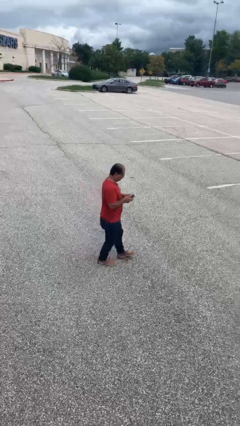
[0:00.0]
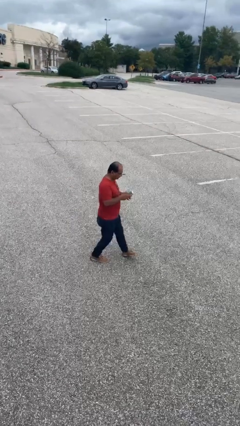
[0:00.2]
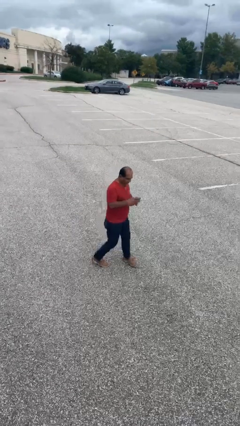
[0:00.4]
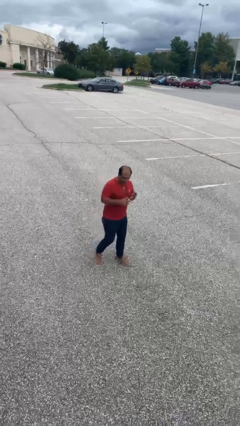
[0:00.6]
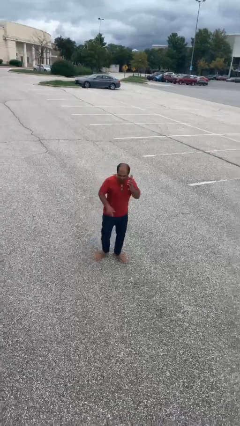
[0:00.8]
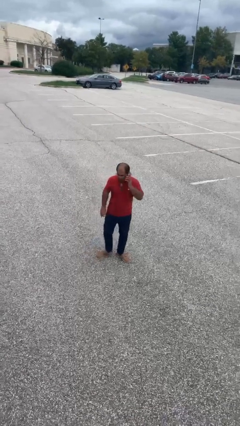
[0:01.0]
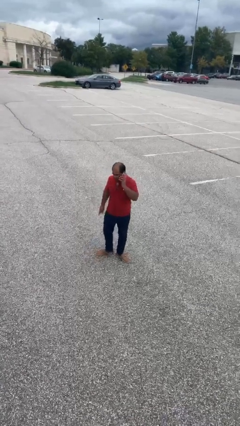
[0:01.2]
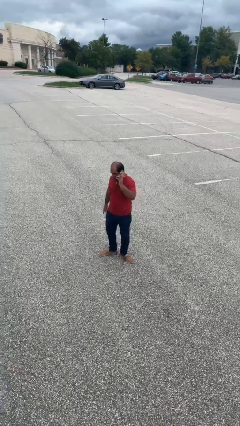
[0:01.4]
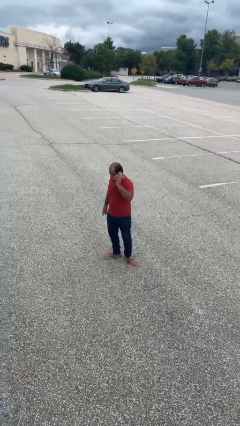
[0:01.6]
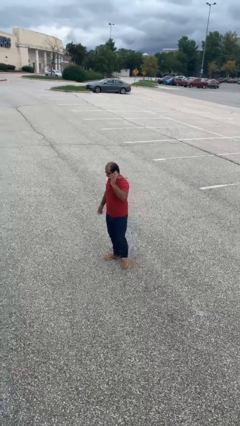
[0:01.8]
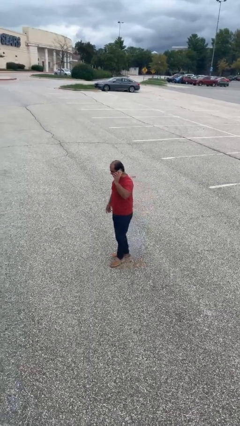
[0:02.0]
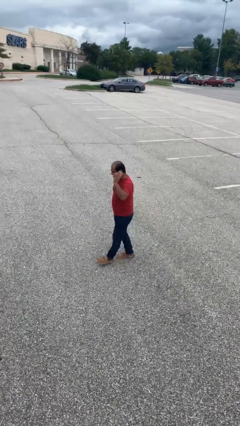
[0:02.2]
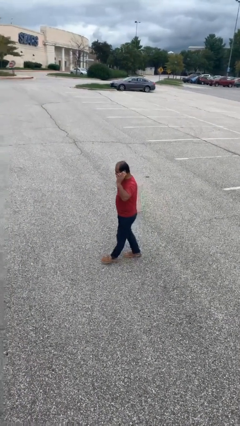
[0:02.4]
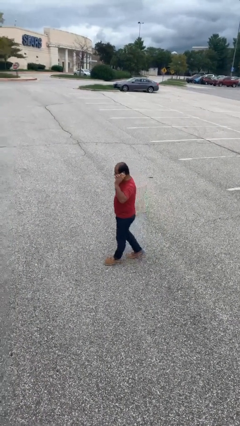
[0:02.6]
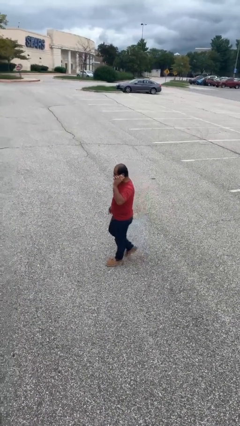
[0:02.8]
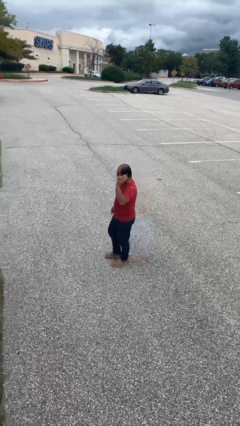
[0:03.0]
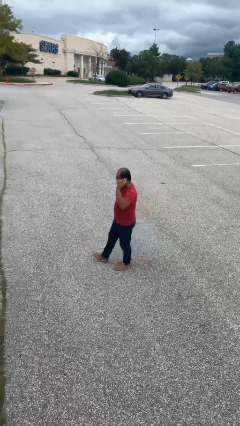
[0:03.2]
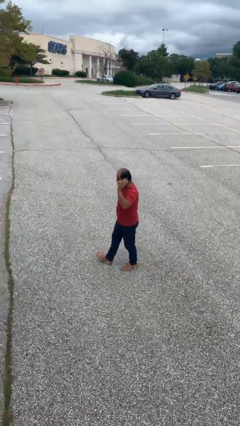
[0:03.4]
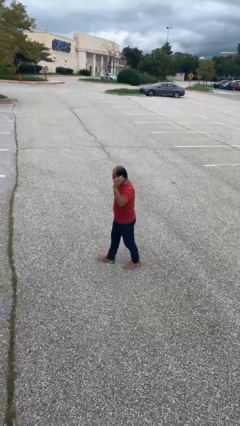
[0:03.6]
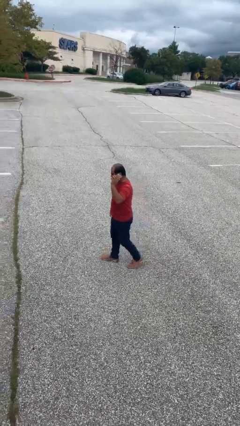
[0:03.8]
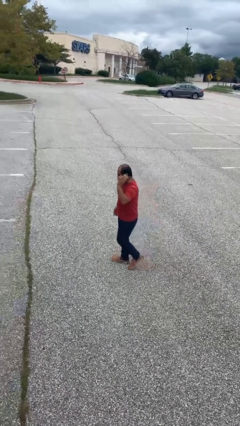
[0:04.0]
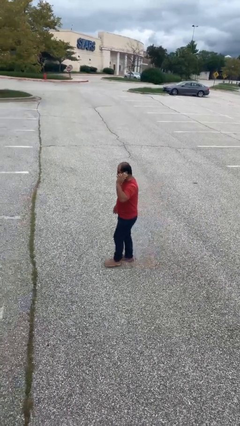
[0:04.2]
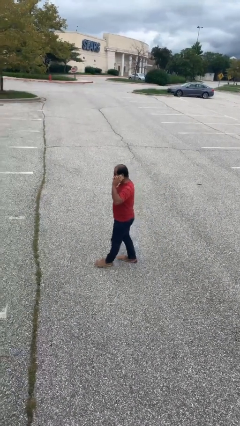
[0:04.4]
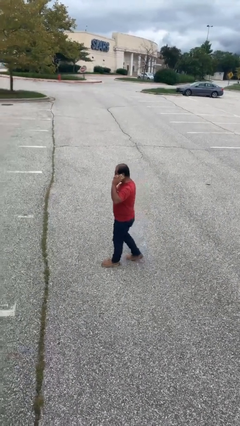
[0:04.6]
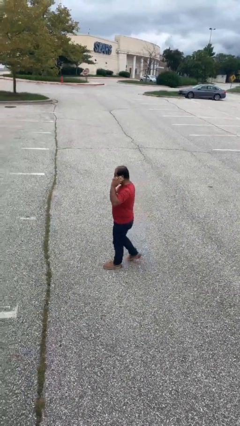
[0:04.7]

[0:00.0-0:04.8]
person talks on phone

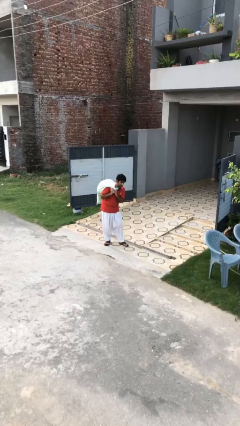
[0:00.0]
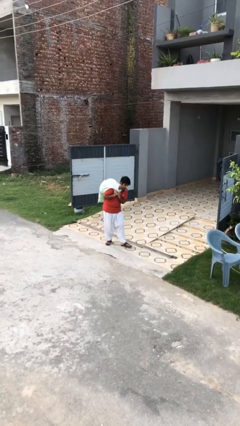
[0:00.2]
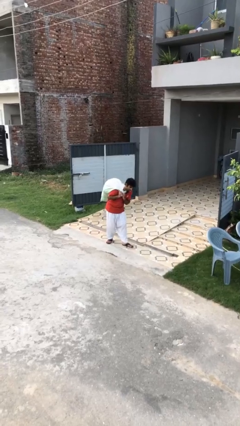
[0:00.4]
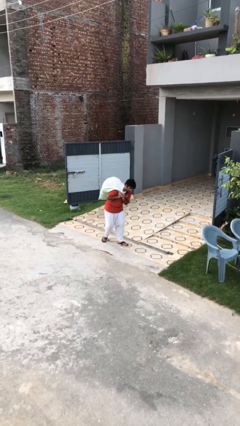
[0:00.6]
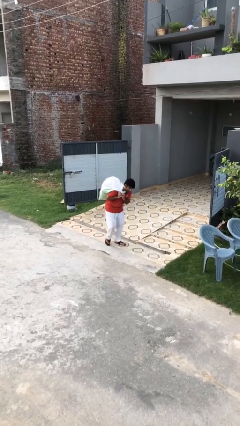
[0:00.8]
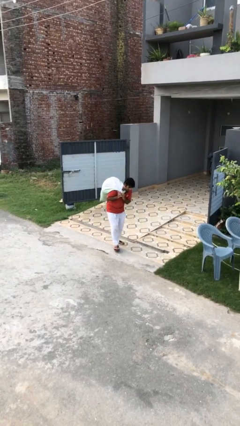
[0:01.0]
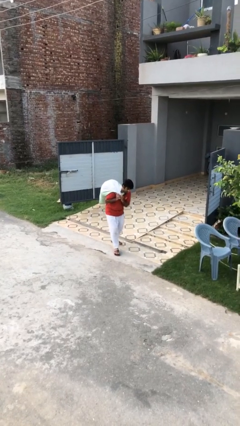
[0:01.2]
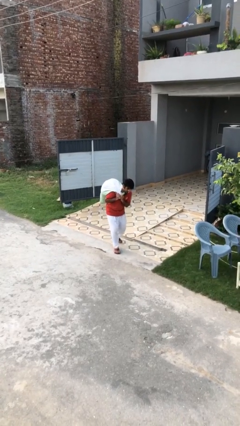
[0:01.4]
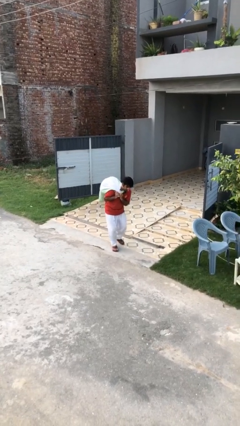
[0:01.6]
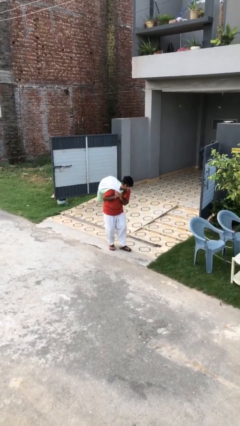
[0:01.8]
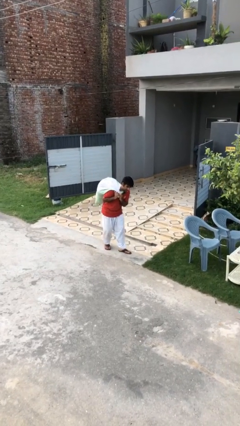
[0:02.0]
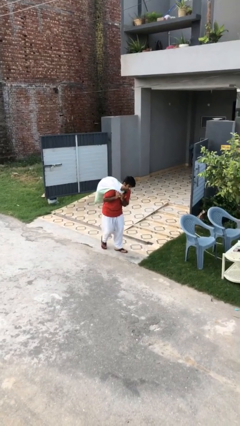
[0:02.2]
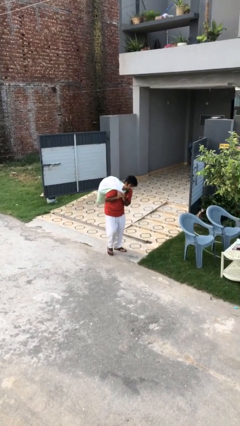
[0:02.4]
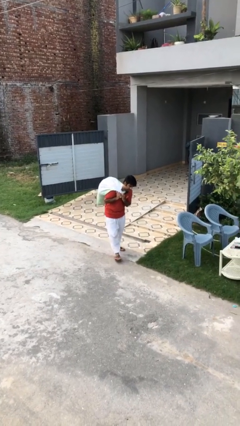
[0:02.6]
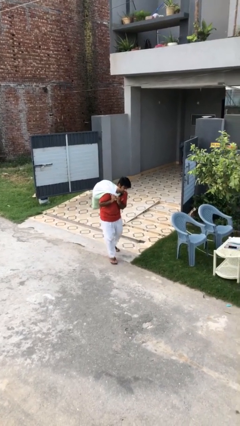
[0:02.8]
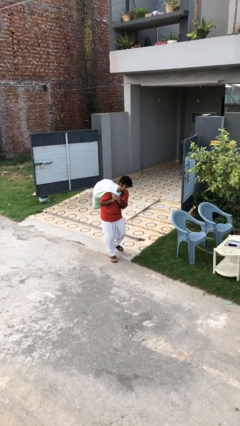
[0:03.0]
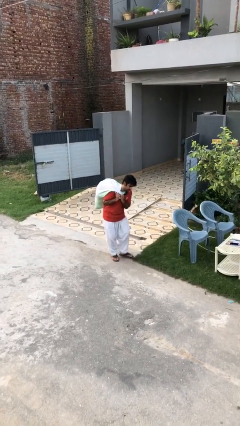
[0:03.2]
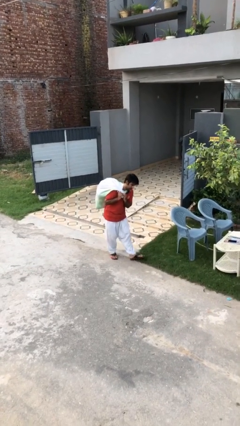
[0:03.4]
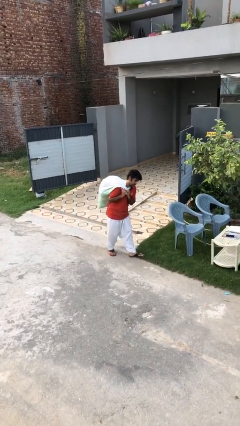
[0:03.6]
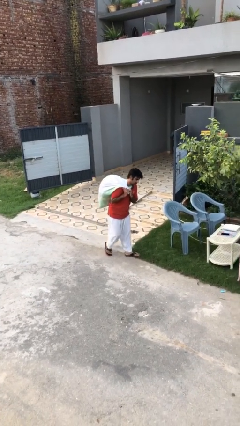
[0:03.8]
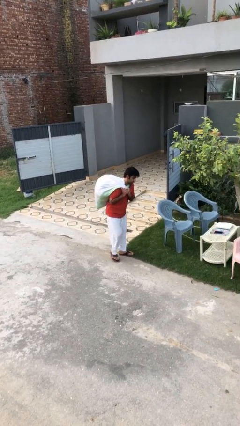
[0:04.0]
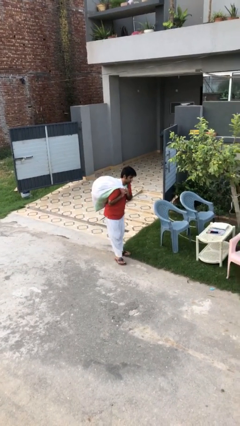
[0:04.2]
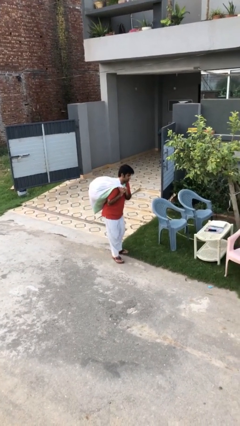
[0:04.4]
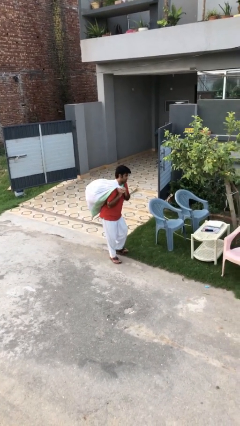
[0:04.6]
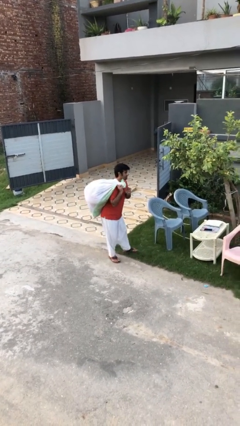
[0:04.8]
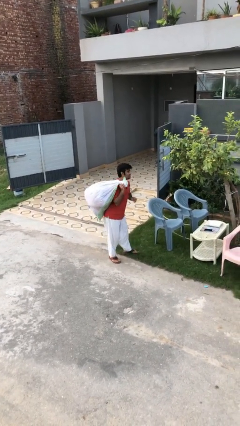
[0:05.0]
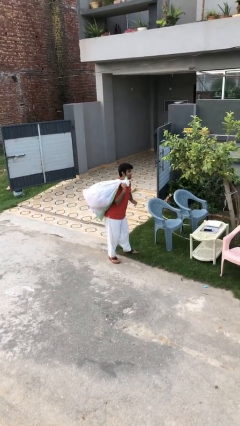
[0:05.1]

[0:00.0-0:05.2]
person carries heavy object

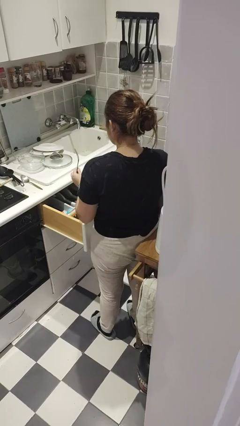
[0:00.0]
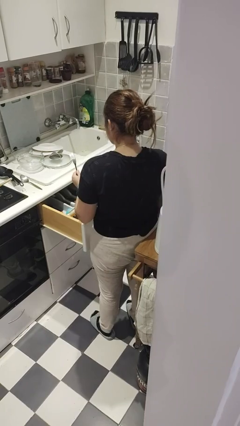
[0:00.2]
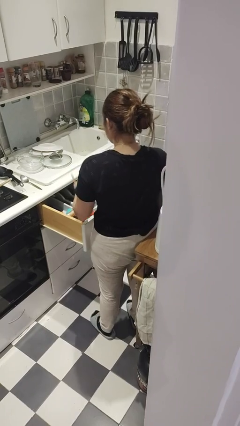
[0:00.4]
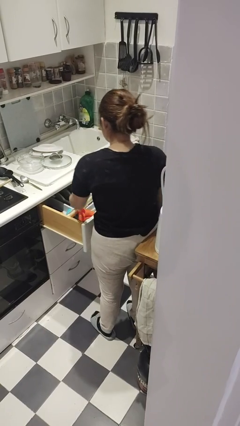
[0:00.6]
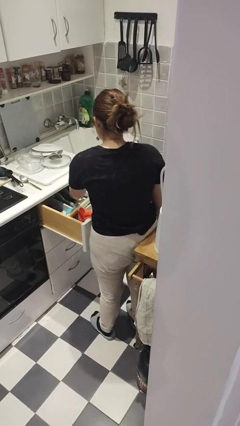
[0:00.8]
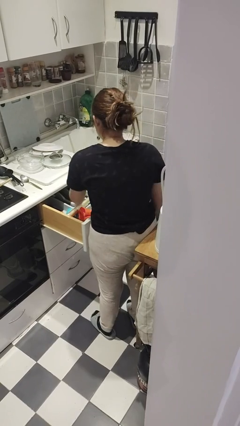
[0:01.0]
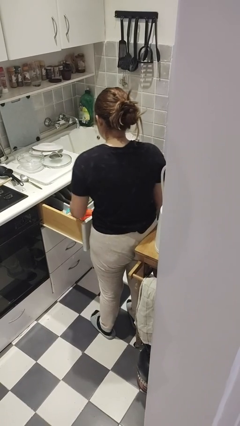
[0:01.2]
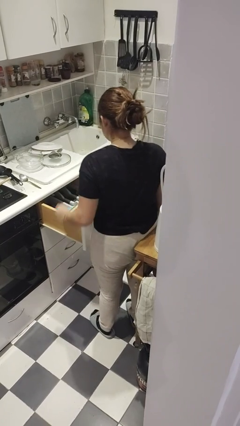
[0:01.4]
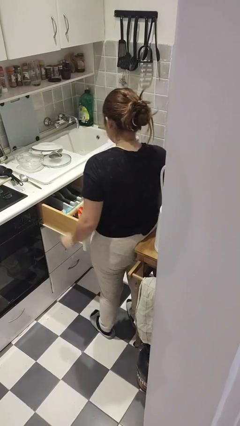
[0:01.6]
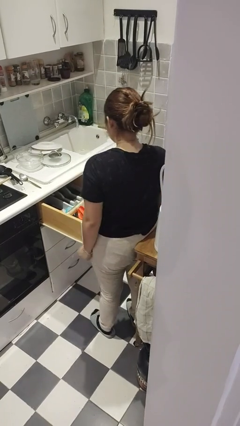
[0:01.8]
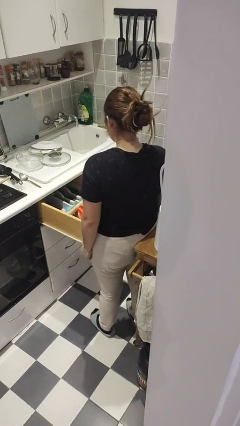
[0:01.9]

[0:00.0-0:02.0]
person puts object into kitchen drawer

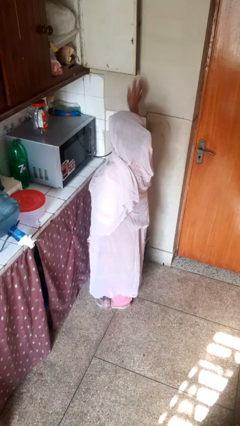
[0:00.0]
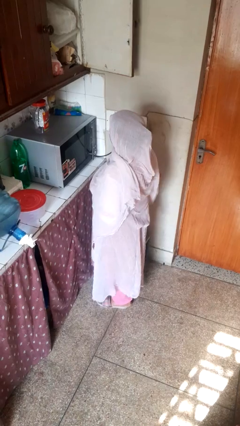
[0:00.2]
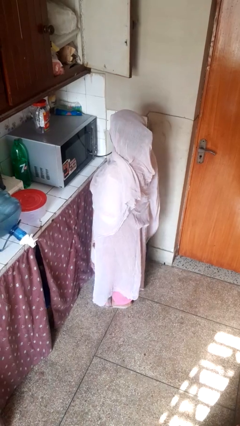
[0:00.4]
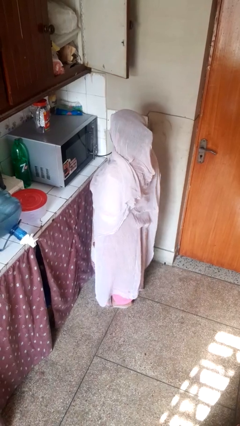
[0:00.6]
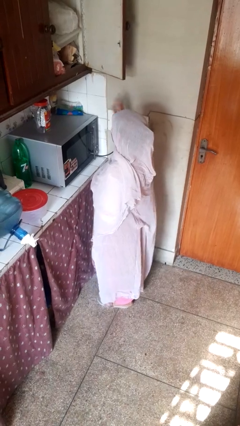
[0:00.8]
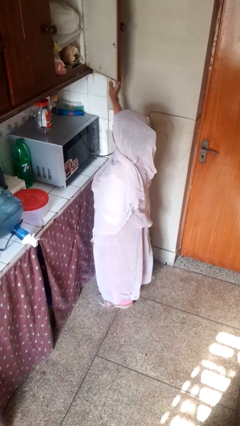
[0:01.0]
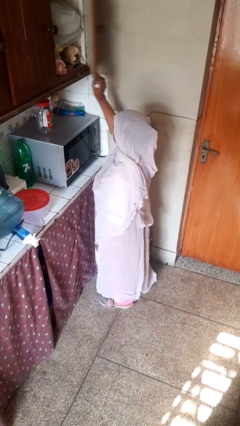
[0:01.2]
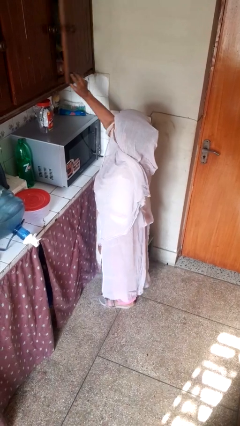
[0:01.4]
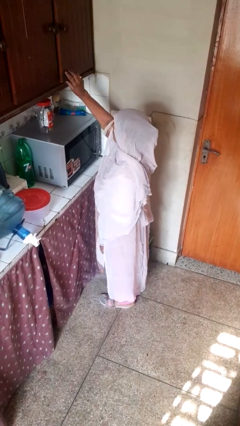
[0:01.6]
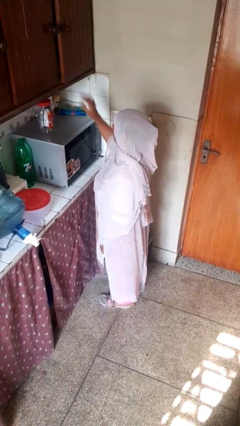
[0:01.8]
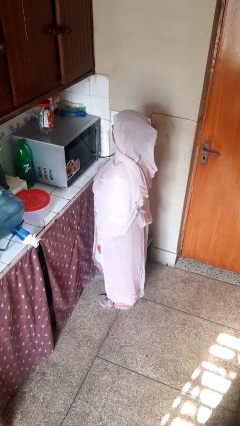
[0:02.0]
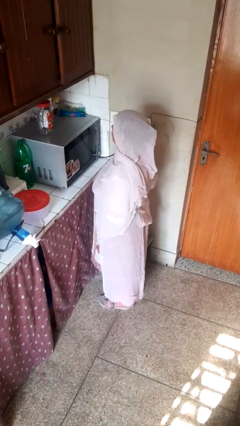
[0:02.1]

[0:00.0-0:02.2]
person closes cabinet

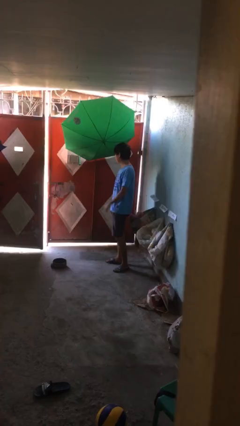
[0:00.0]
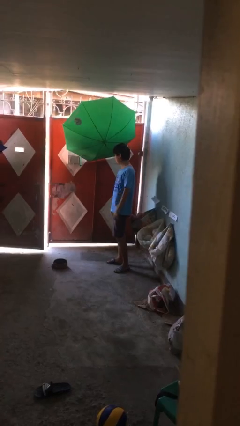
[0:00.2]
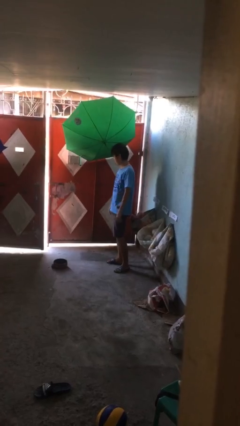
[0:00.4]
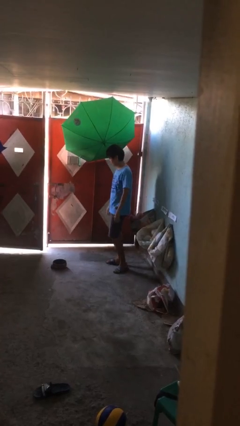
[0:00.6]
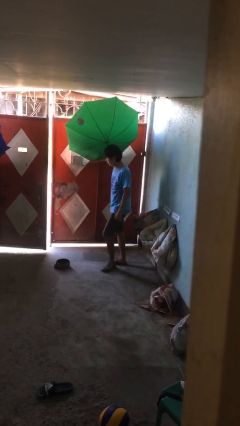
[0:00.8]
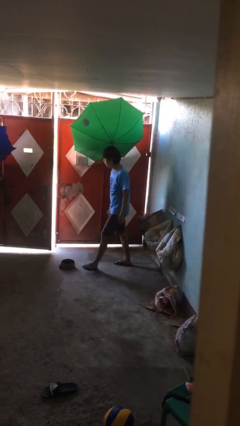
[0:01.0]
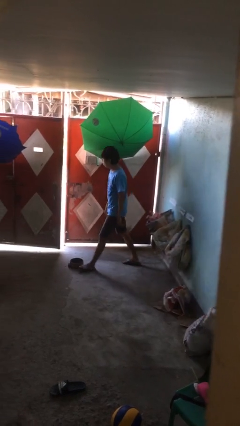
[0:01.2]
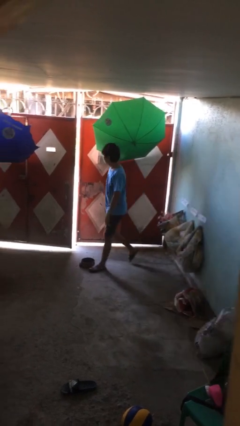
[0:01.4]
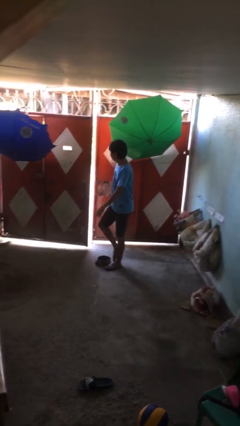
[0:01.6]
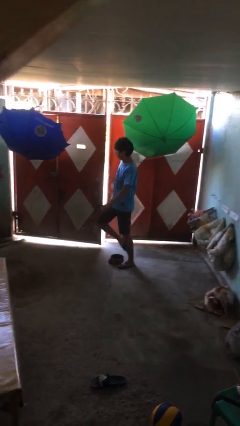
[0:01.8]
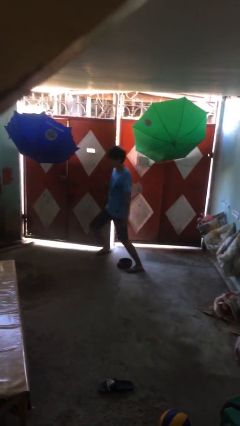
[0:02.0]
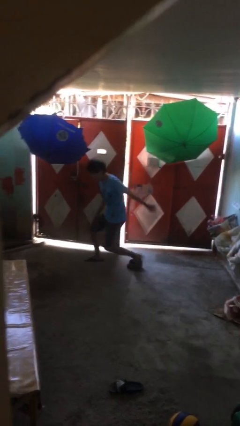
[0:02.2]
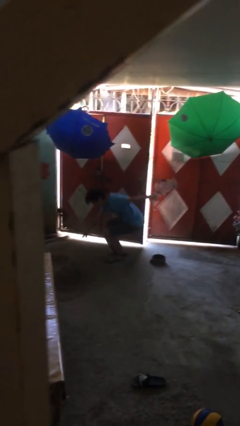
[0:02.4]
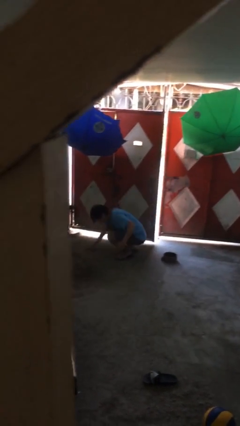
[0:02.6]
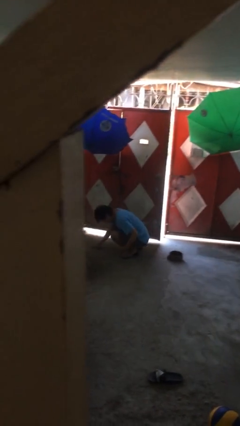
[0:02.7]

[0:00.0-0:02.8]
person trips on object on floor

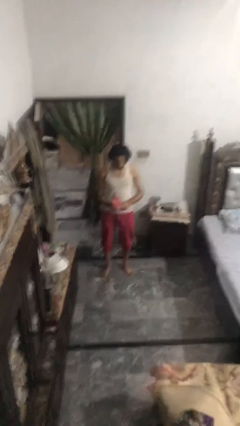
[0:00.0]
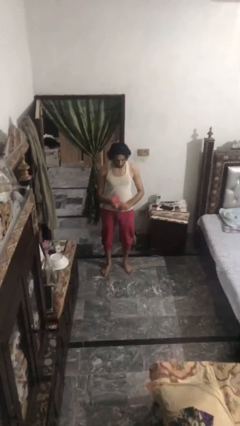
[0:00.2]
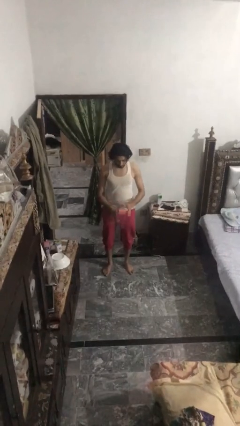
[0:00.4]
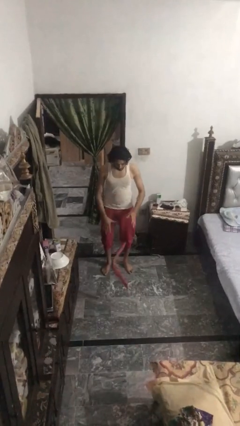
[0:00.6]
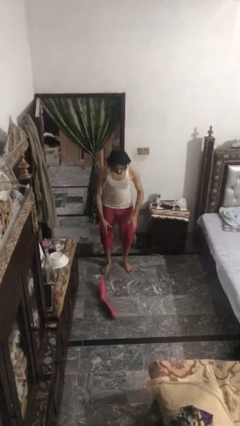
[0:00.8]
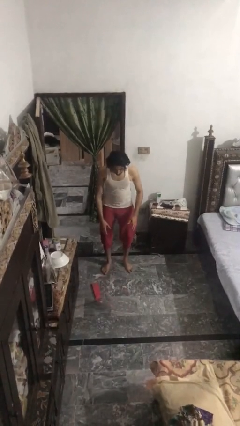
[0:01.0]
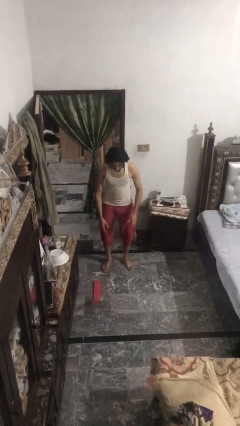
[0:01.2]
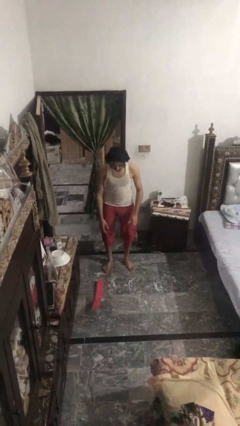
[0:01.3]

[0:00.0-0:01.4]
person drops object
